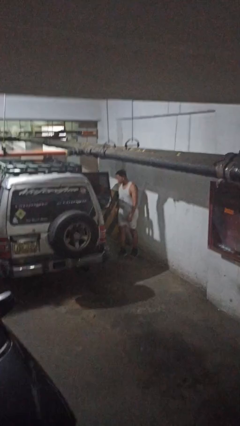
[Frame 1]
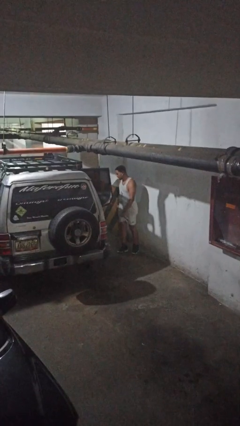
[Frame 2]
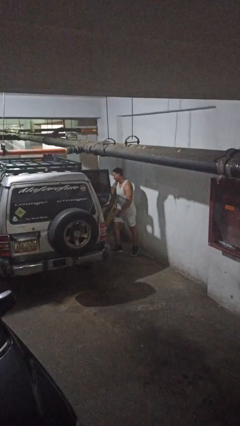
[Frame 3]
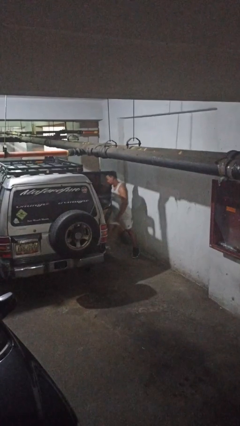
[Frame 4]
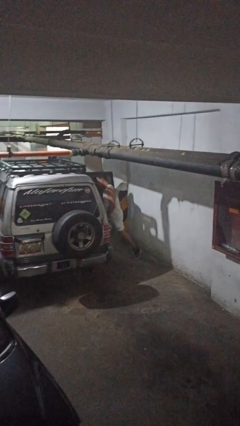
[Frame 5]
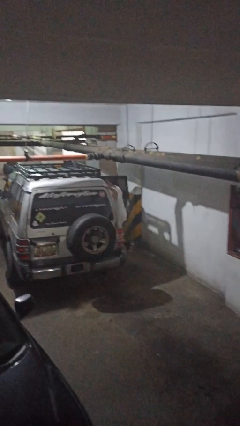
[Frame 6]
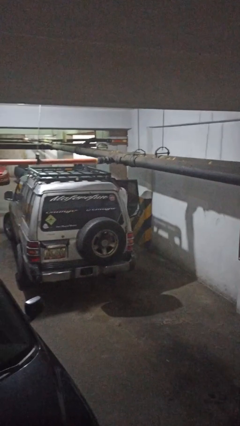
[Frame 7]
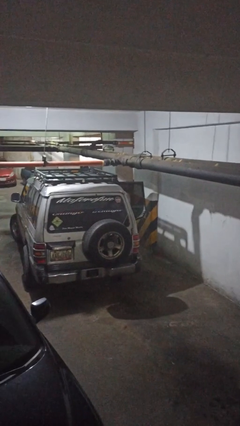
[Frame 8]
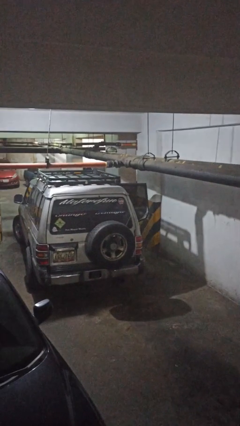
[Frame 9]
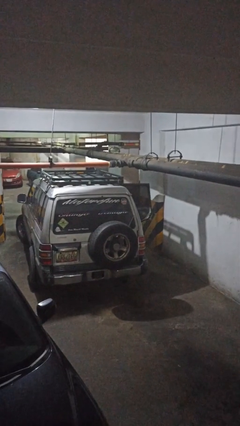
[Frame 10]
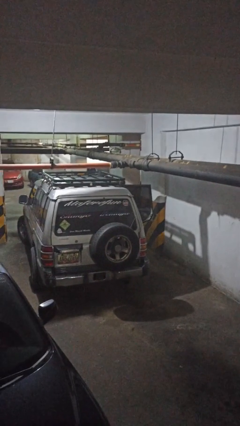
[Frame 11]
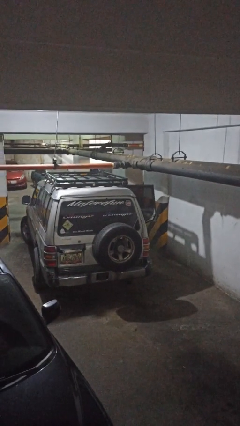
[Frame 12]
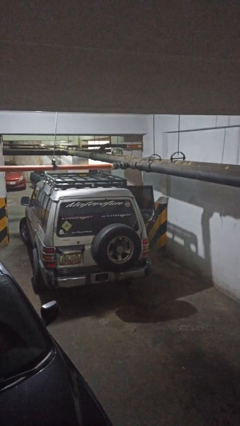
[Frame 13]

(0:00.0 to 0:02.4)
person enters car

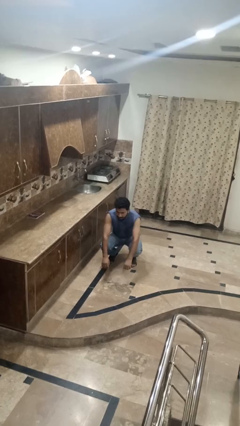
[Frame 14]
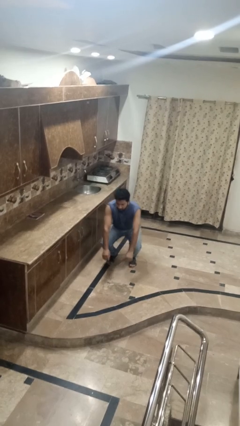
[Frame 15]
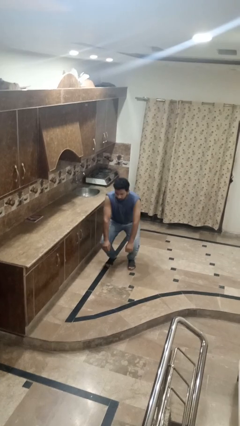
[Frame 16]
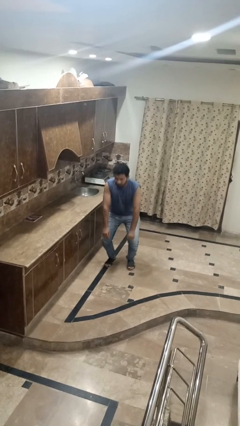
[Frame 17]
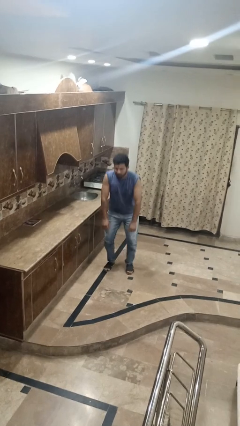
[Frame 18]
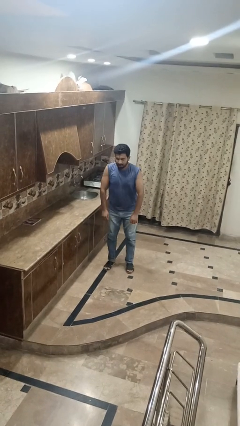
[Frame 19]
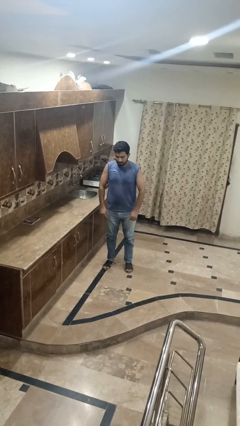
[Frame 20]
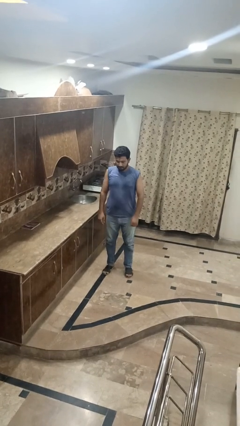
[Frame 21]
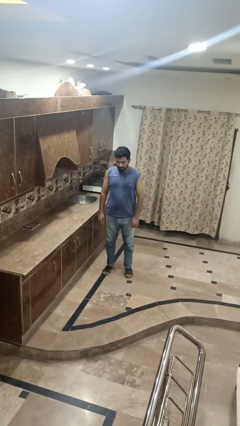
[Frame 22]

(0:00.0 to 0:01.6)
person stands up

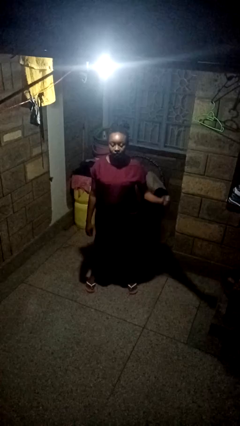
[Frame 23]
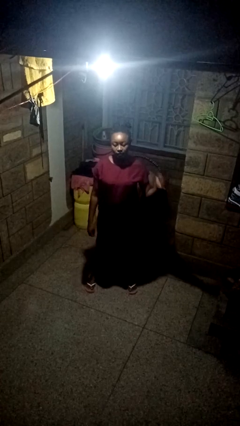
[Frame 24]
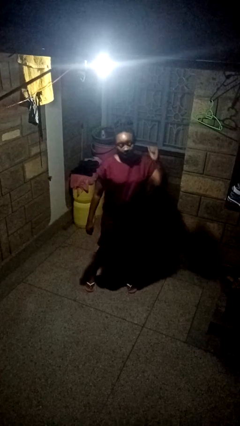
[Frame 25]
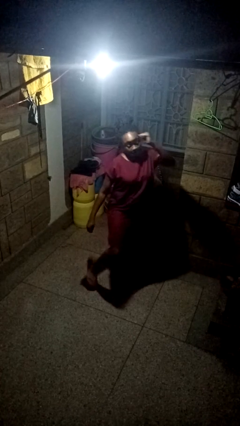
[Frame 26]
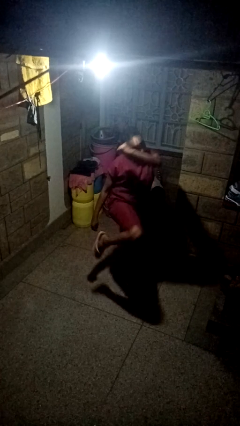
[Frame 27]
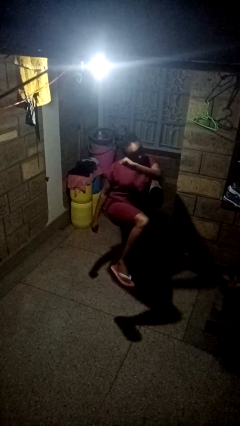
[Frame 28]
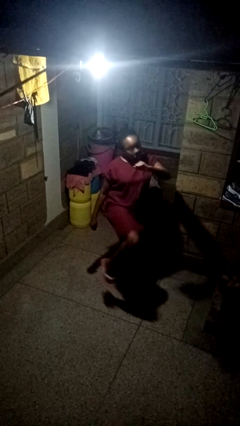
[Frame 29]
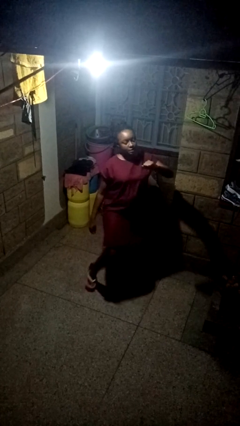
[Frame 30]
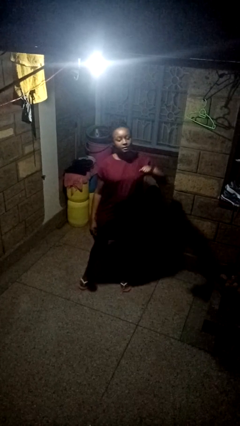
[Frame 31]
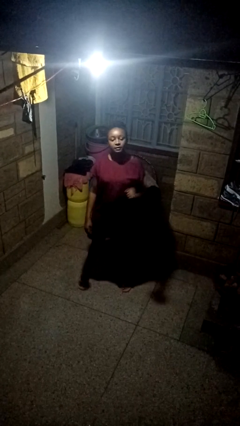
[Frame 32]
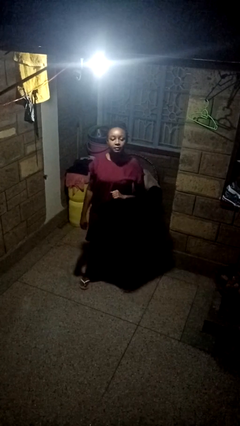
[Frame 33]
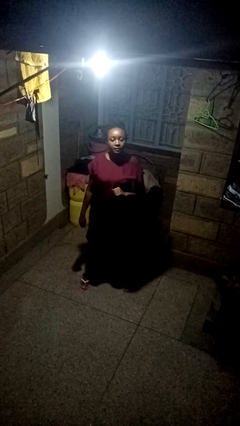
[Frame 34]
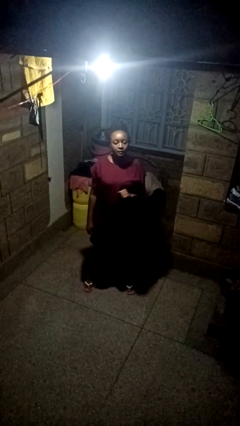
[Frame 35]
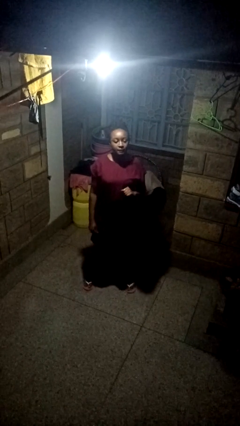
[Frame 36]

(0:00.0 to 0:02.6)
person karate kicks

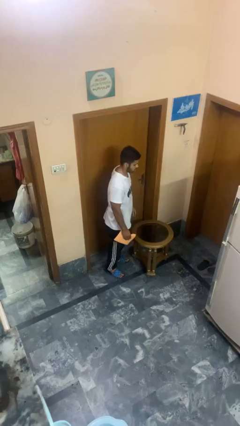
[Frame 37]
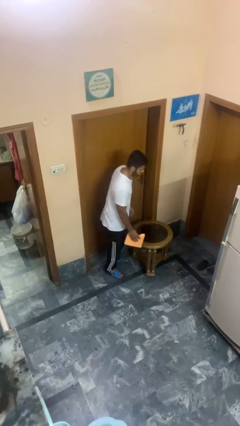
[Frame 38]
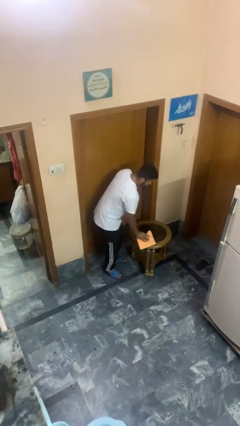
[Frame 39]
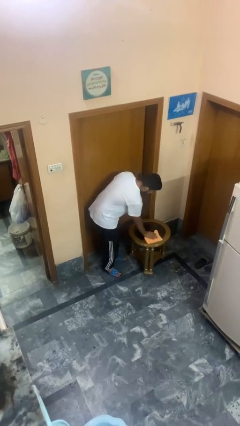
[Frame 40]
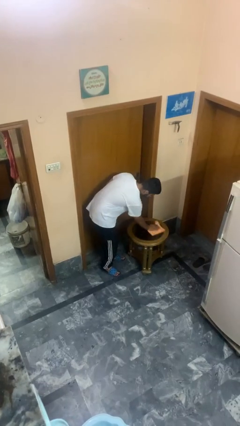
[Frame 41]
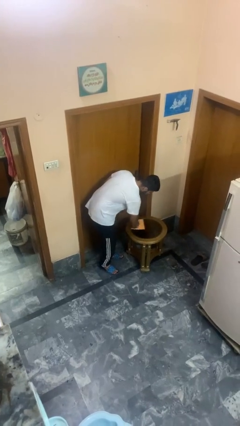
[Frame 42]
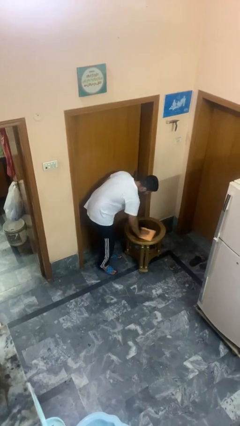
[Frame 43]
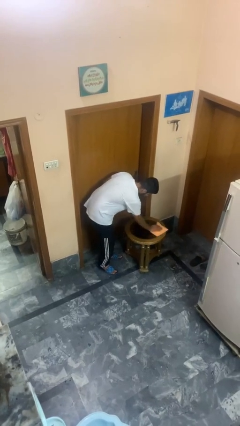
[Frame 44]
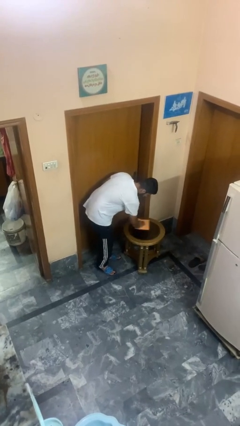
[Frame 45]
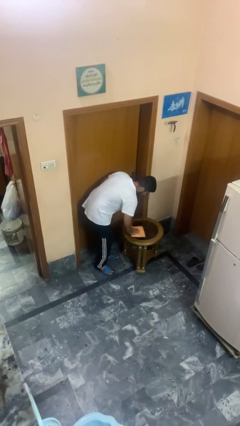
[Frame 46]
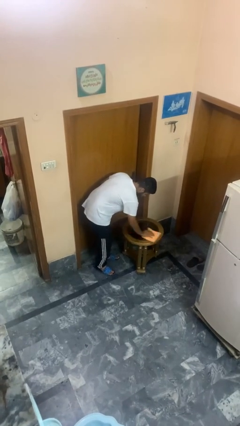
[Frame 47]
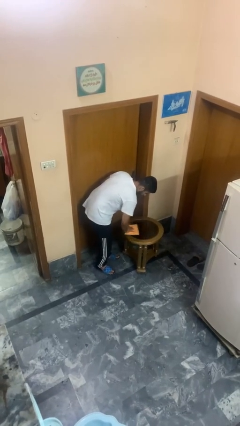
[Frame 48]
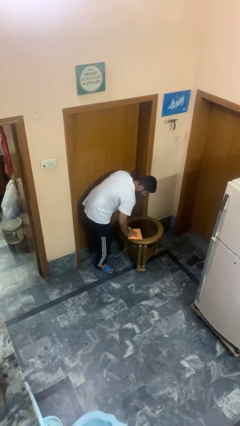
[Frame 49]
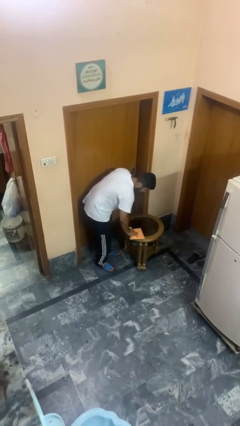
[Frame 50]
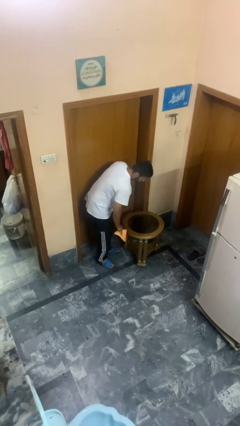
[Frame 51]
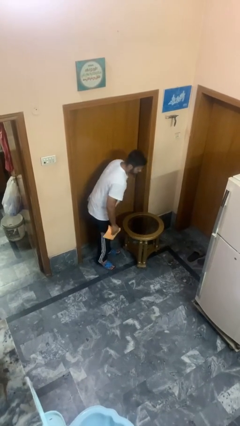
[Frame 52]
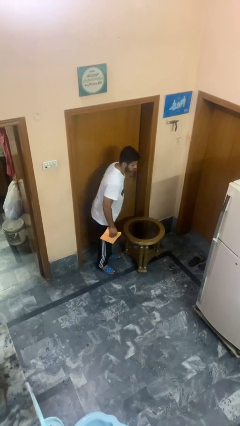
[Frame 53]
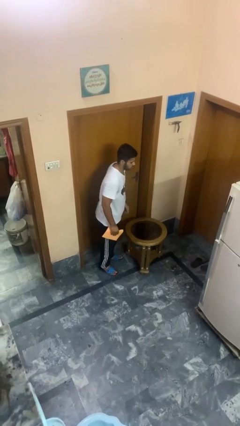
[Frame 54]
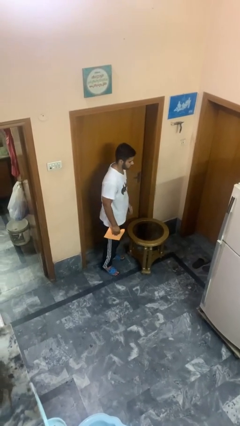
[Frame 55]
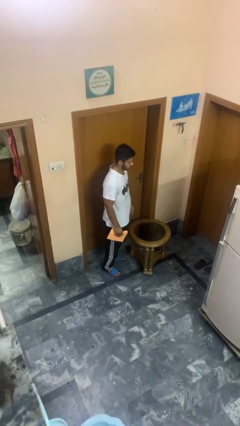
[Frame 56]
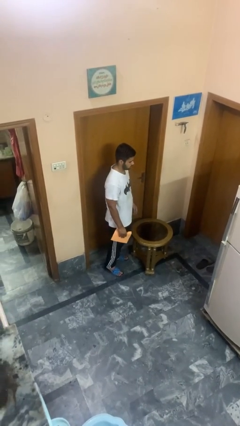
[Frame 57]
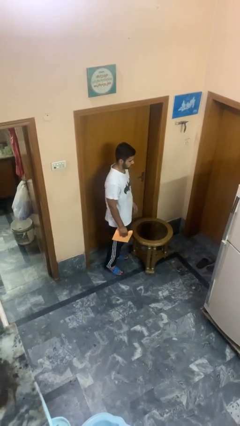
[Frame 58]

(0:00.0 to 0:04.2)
person cleans table with rag

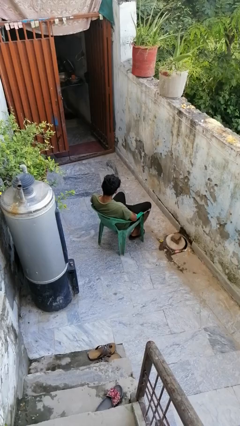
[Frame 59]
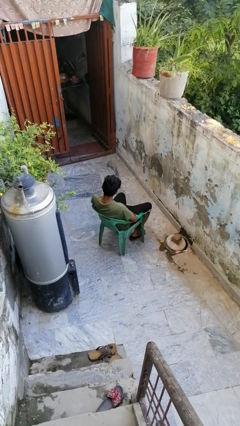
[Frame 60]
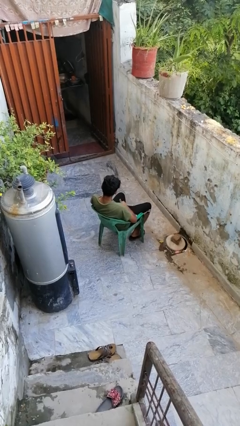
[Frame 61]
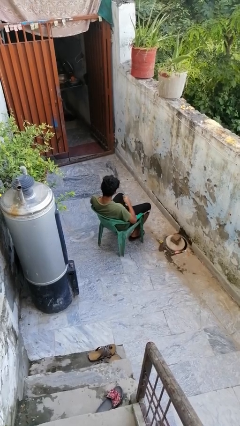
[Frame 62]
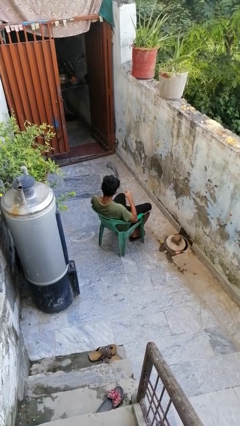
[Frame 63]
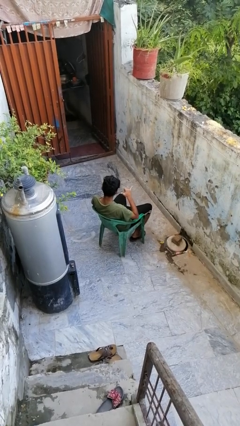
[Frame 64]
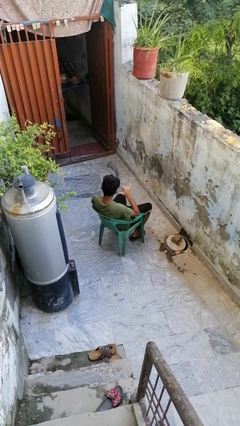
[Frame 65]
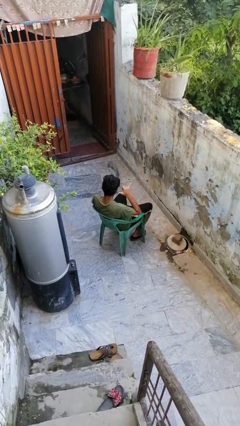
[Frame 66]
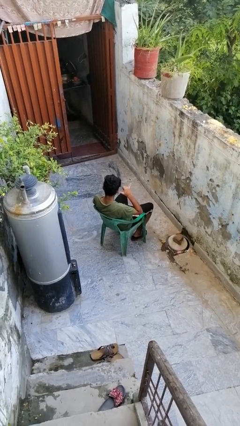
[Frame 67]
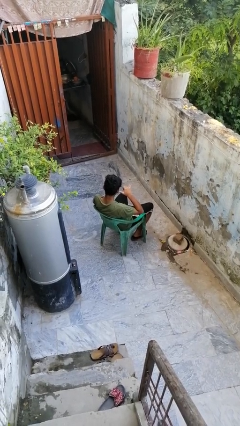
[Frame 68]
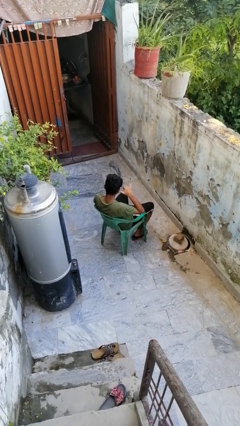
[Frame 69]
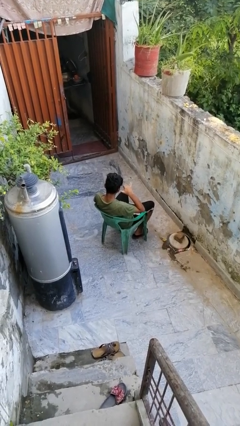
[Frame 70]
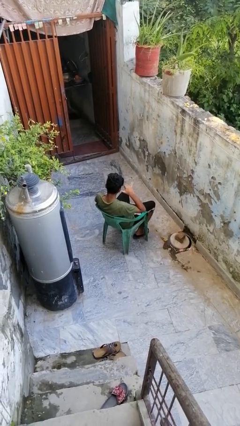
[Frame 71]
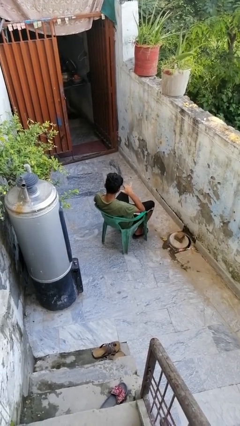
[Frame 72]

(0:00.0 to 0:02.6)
person gestures call me

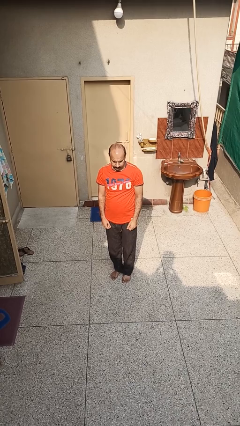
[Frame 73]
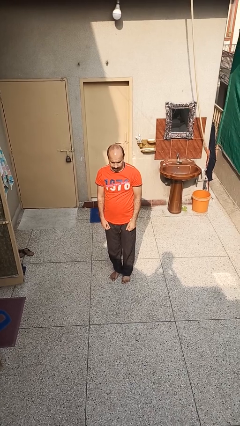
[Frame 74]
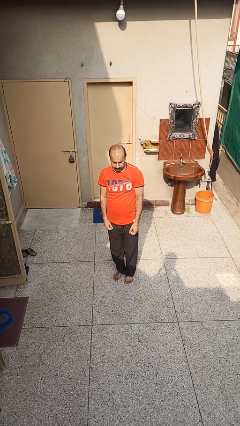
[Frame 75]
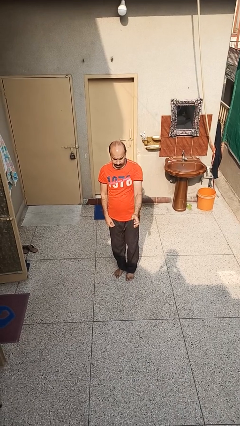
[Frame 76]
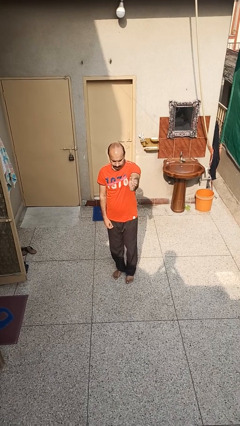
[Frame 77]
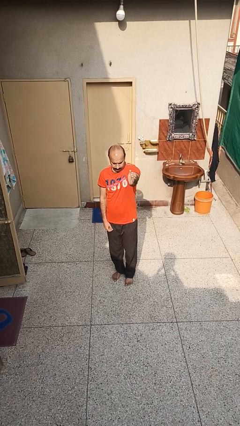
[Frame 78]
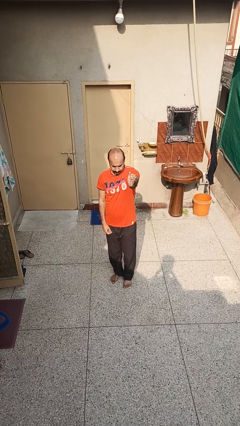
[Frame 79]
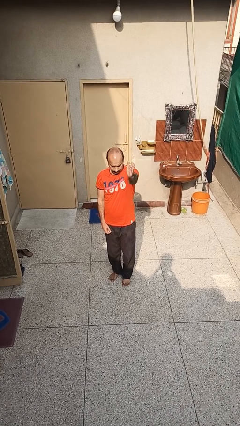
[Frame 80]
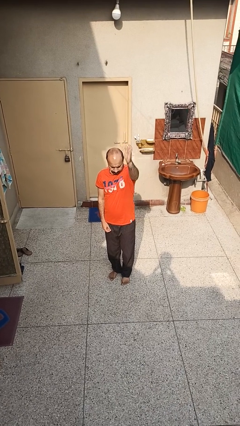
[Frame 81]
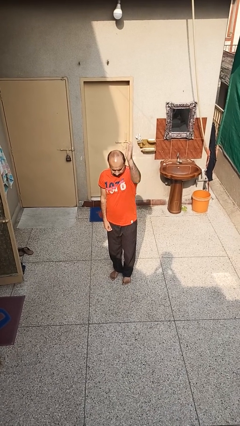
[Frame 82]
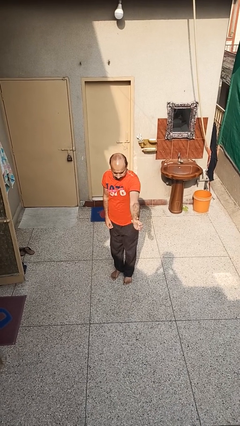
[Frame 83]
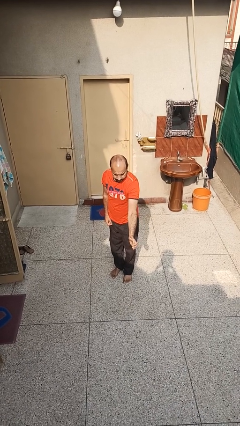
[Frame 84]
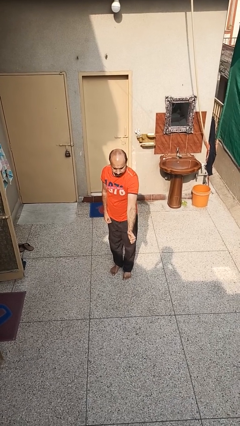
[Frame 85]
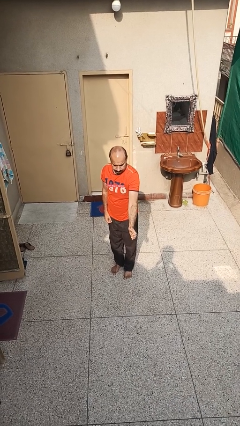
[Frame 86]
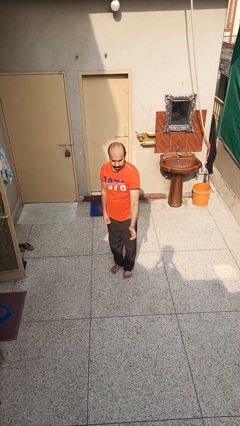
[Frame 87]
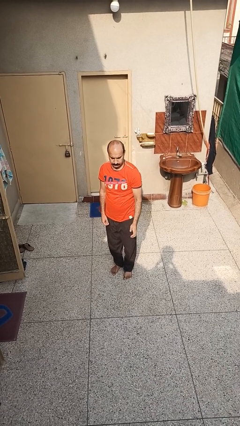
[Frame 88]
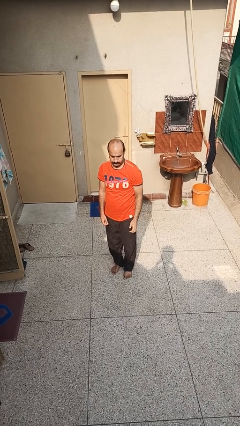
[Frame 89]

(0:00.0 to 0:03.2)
person karate chop

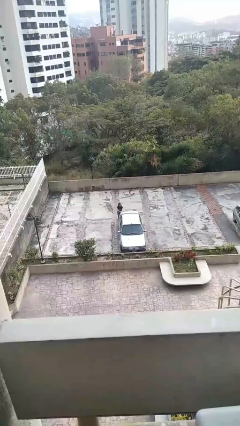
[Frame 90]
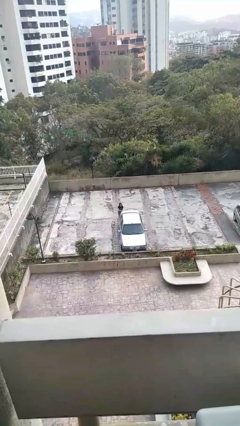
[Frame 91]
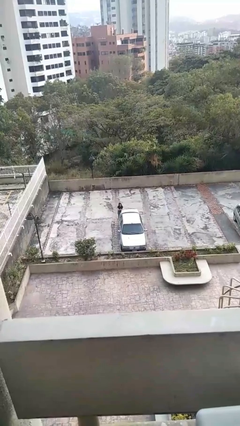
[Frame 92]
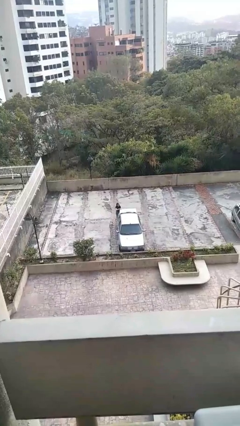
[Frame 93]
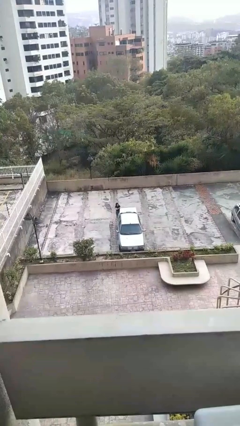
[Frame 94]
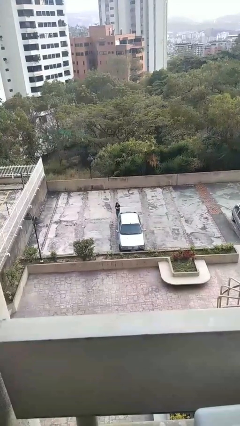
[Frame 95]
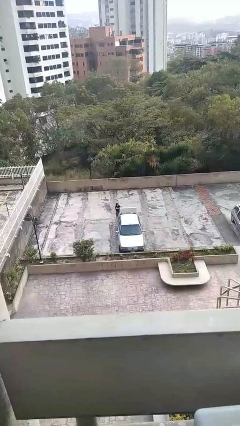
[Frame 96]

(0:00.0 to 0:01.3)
person opens car trunk
